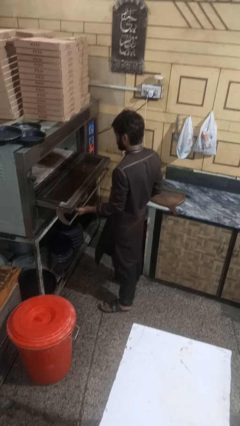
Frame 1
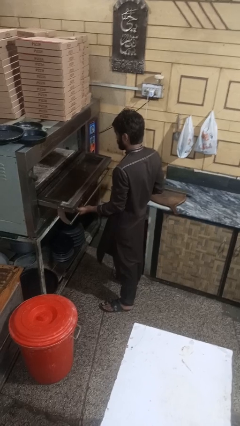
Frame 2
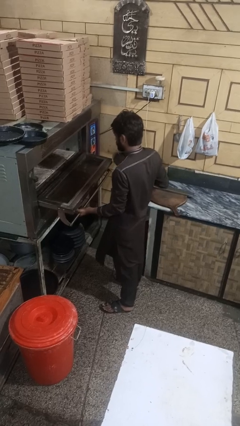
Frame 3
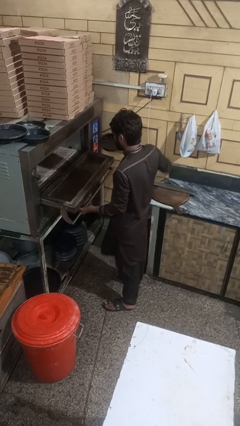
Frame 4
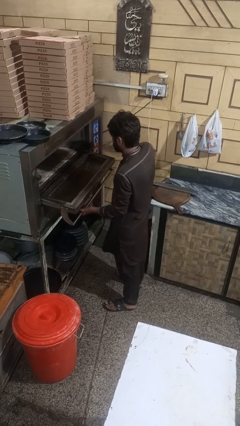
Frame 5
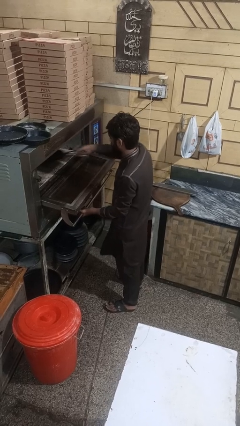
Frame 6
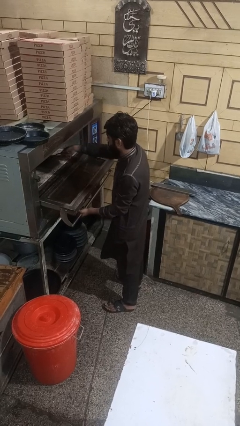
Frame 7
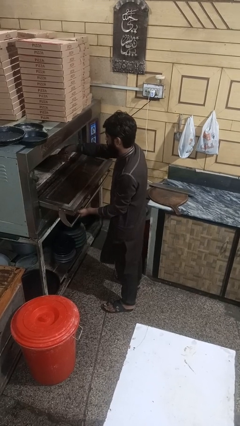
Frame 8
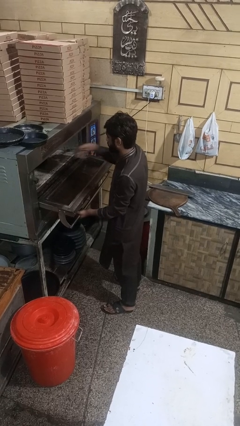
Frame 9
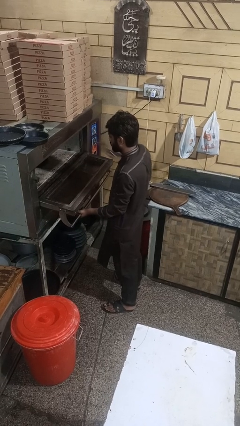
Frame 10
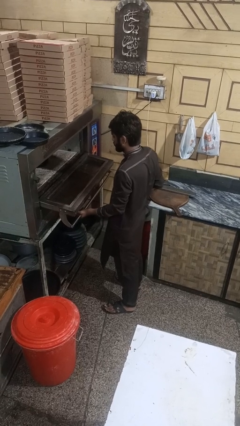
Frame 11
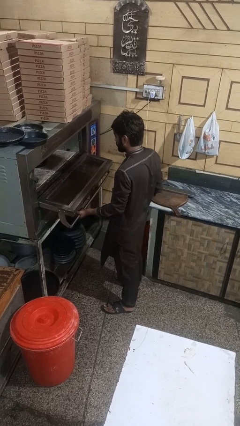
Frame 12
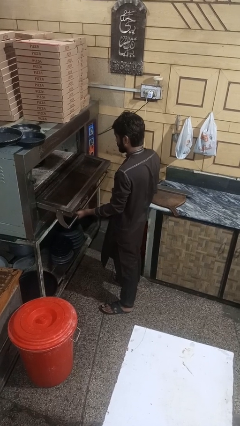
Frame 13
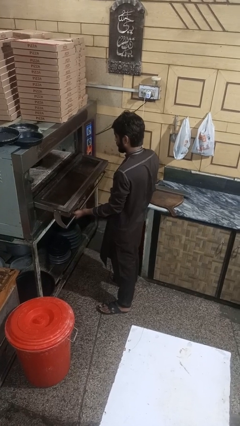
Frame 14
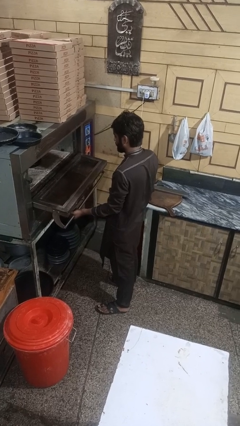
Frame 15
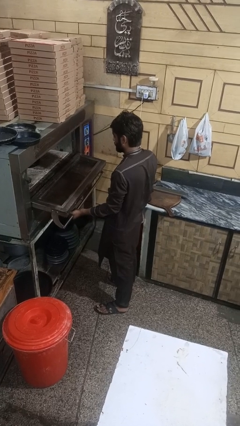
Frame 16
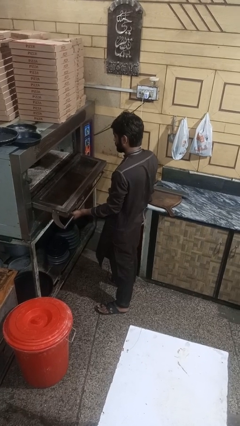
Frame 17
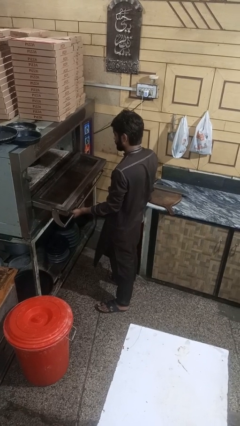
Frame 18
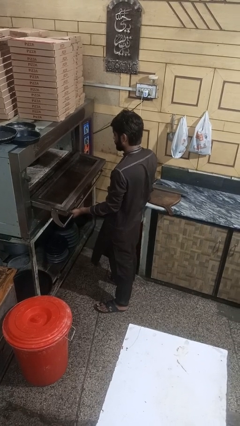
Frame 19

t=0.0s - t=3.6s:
person puts object into microwave

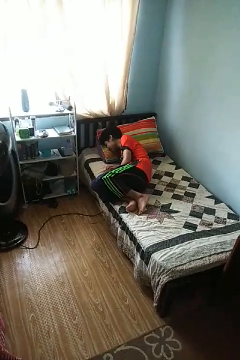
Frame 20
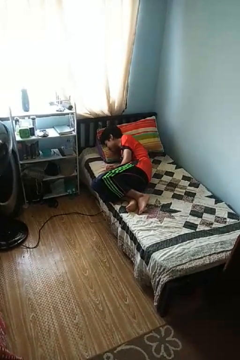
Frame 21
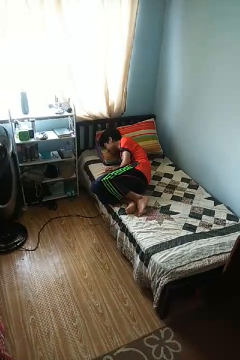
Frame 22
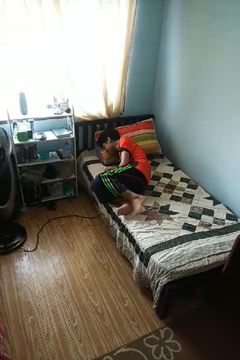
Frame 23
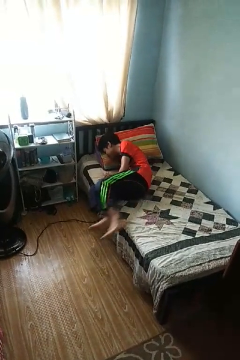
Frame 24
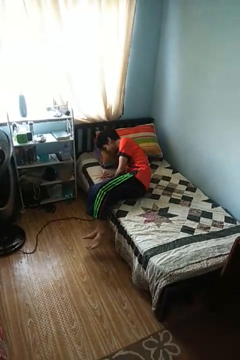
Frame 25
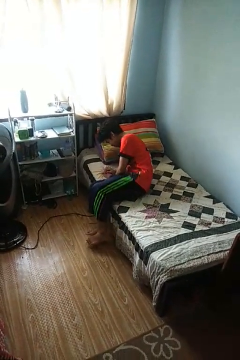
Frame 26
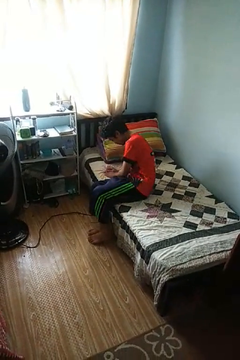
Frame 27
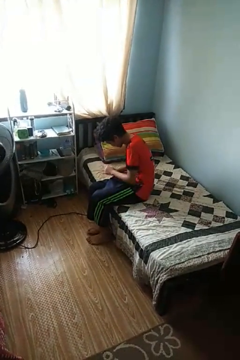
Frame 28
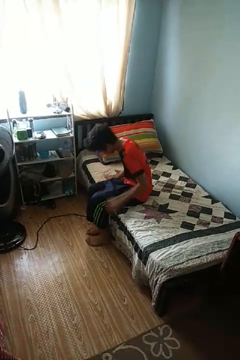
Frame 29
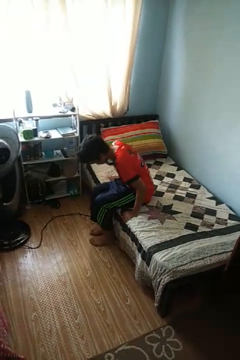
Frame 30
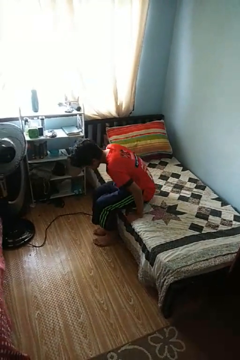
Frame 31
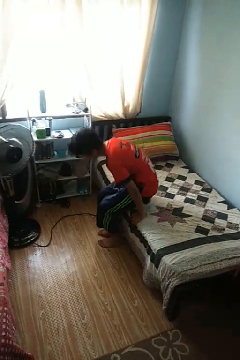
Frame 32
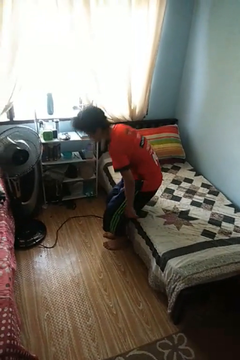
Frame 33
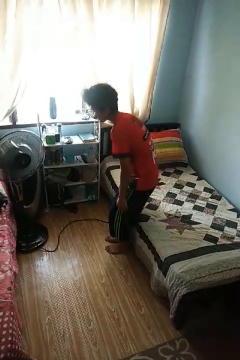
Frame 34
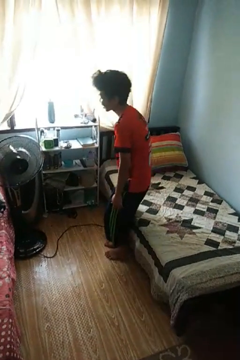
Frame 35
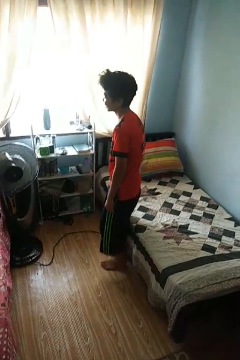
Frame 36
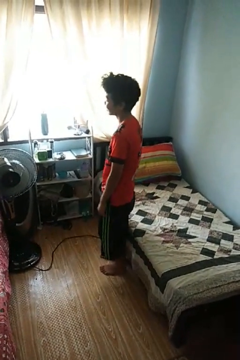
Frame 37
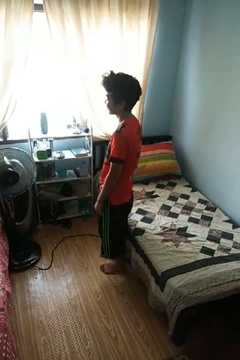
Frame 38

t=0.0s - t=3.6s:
person stands up

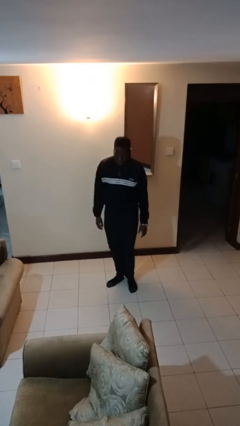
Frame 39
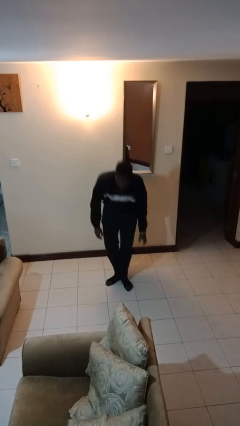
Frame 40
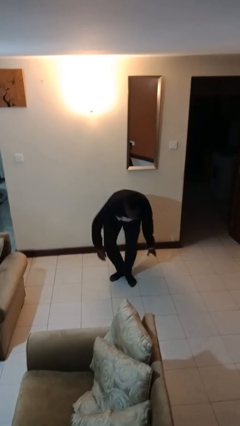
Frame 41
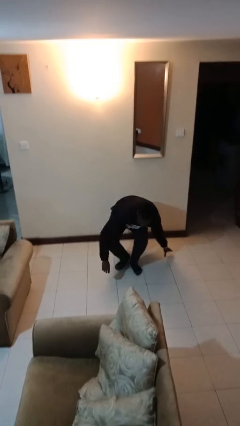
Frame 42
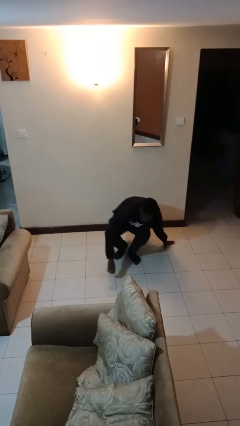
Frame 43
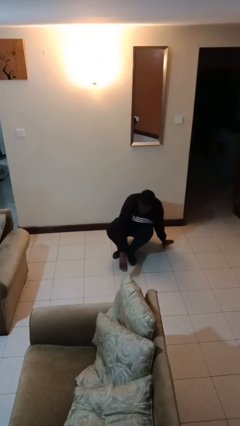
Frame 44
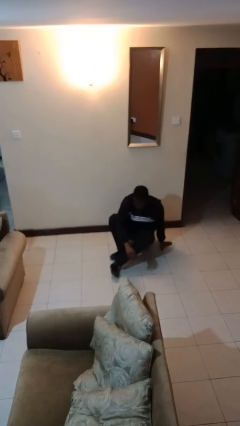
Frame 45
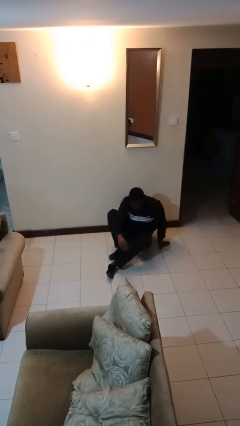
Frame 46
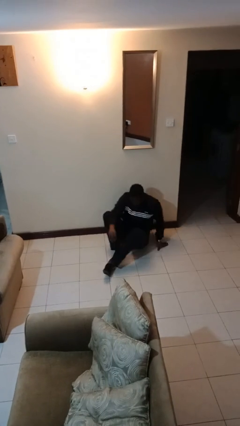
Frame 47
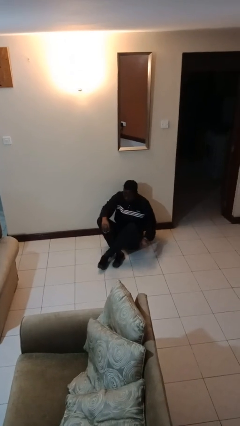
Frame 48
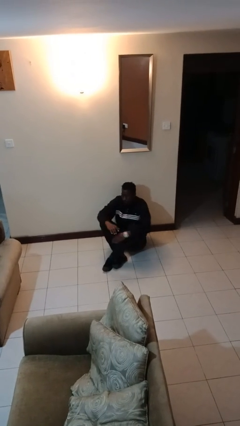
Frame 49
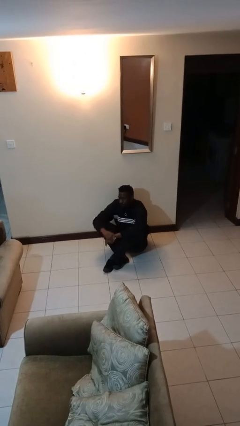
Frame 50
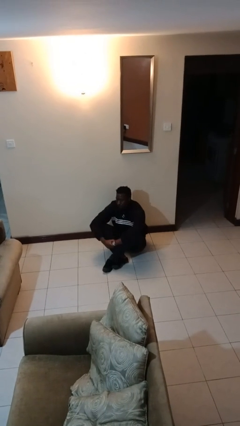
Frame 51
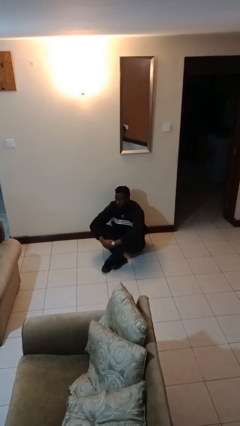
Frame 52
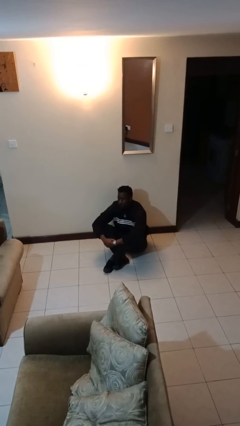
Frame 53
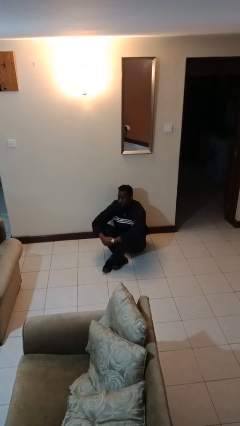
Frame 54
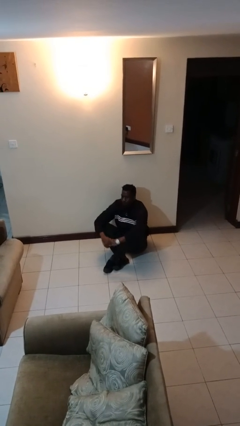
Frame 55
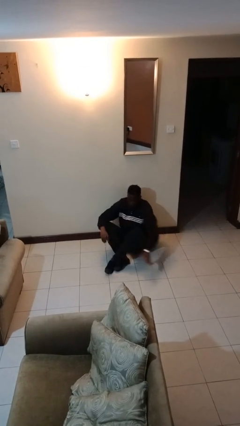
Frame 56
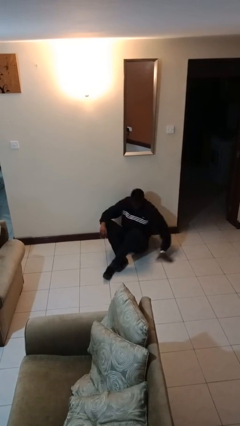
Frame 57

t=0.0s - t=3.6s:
person sits crisscross

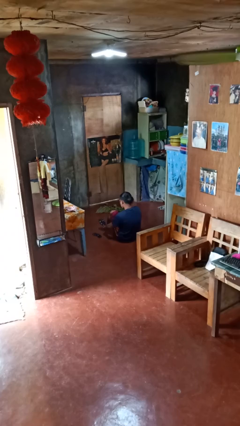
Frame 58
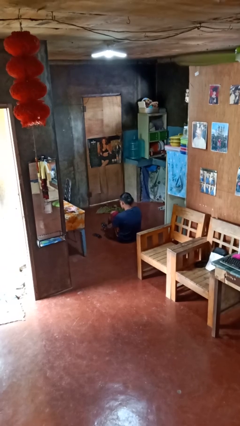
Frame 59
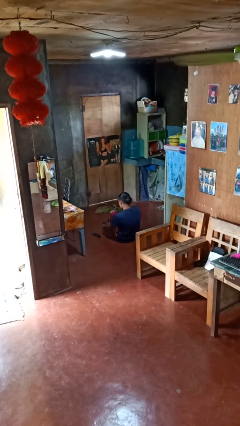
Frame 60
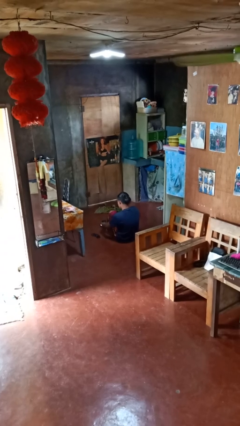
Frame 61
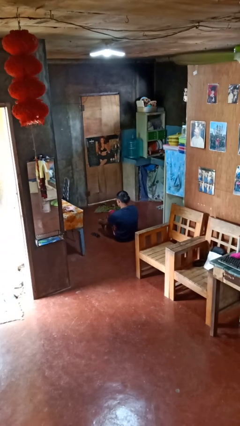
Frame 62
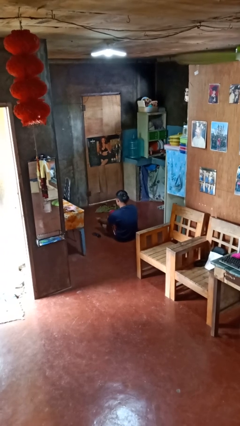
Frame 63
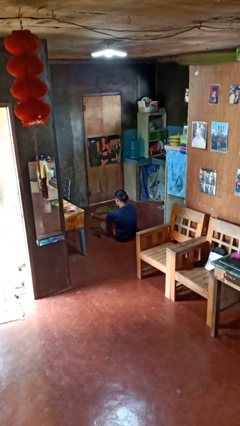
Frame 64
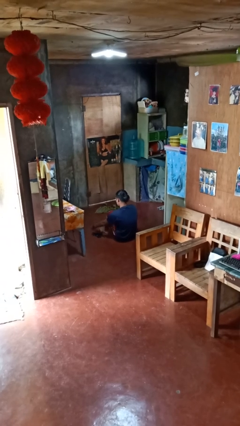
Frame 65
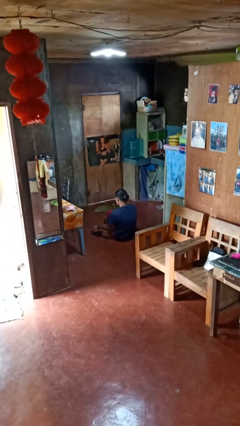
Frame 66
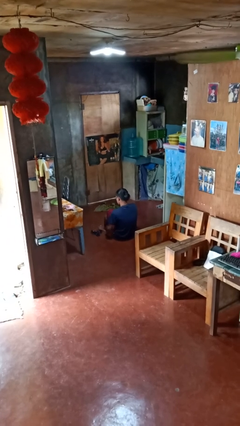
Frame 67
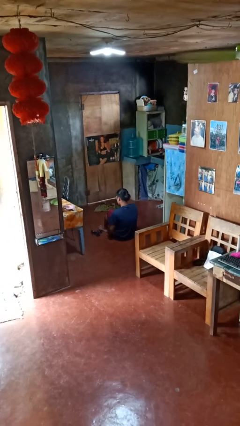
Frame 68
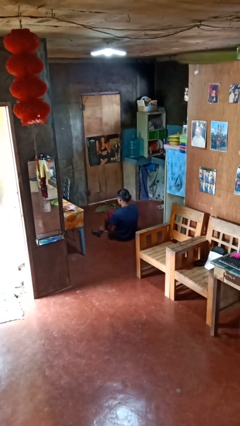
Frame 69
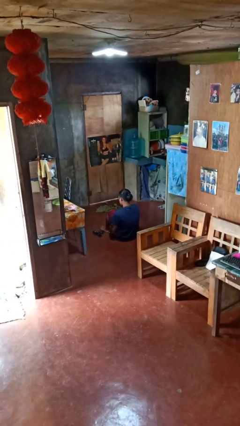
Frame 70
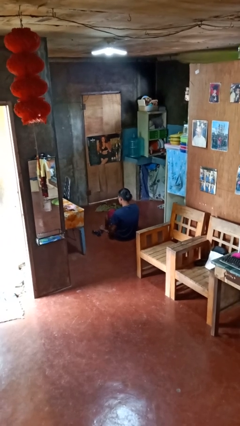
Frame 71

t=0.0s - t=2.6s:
person takes off socks

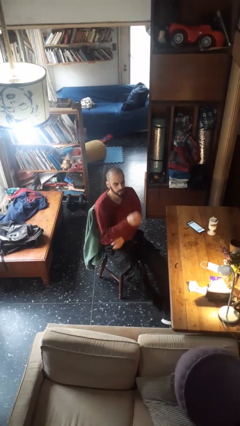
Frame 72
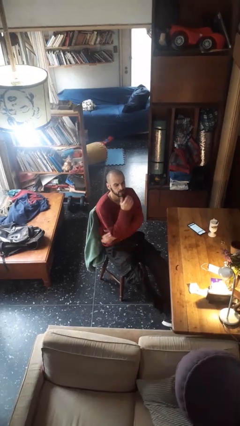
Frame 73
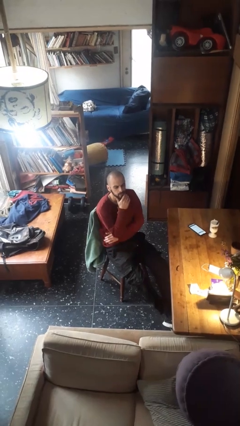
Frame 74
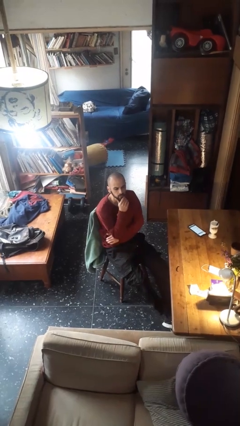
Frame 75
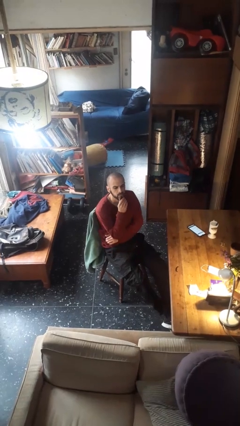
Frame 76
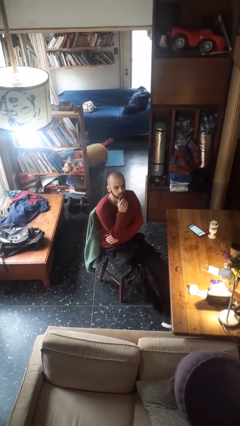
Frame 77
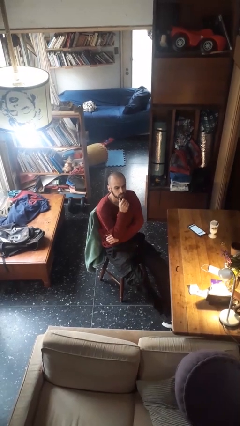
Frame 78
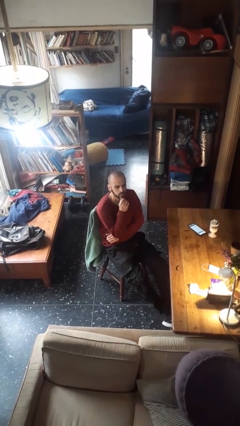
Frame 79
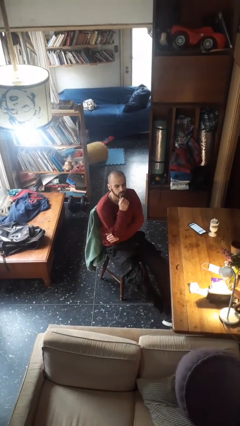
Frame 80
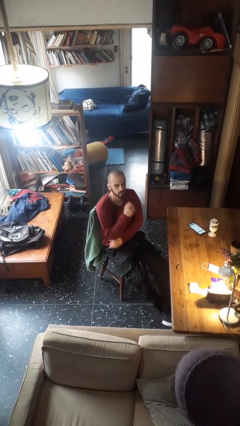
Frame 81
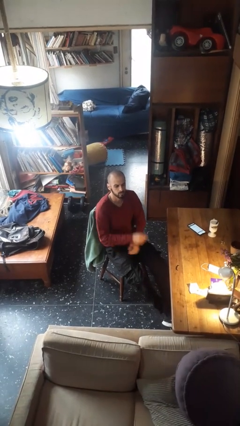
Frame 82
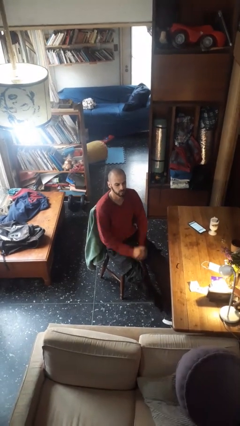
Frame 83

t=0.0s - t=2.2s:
person strokes chin

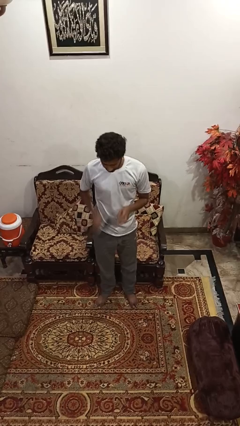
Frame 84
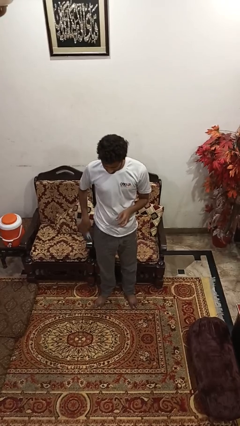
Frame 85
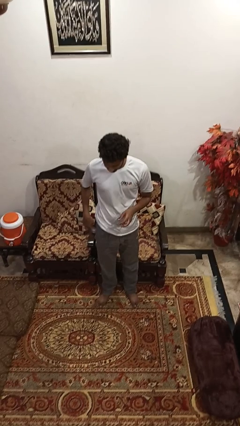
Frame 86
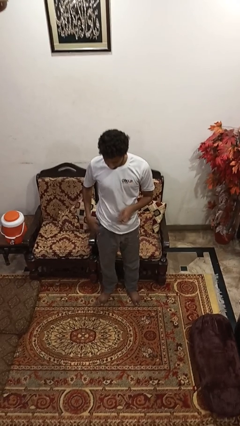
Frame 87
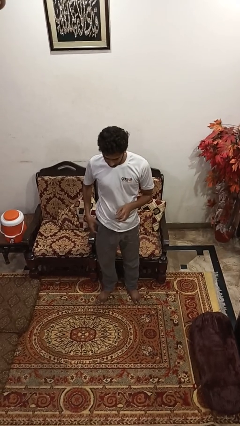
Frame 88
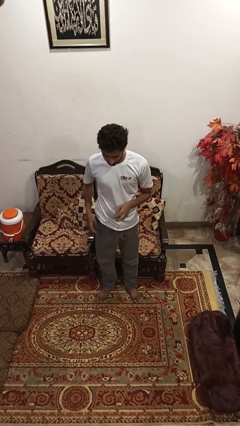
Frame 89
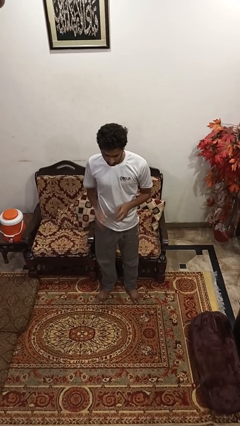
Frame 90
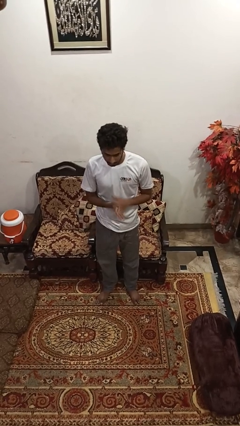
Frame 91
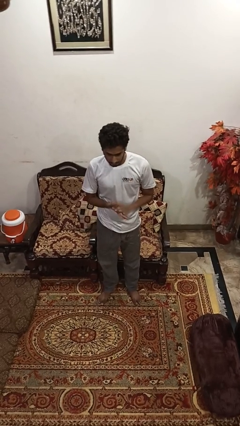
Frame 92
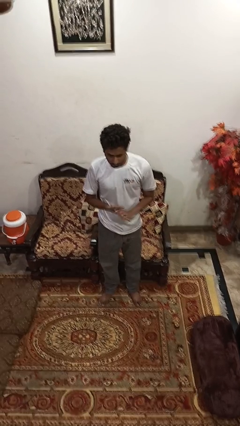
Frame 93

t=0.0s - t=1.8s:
person puts phone into pocket

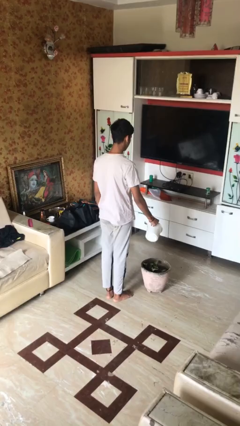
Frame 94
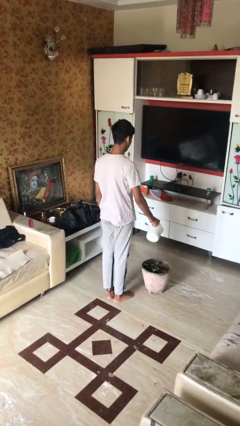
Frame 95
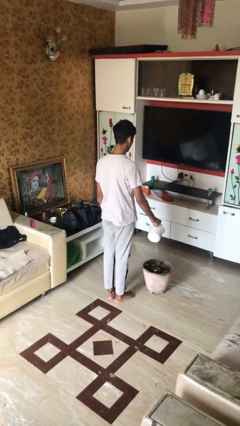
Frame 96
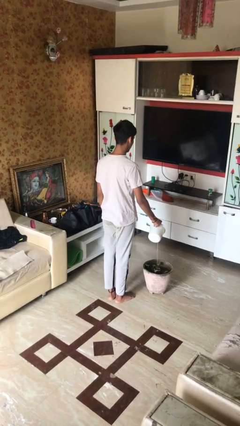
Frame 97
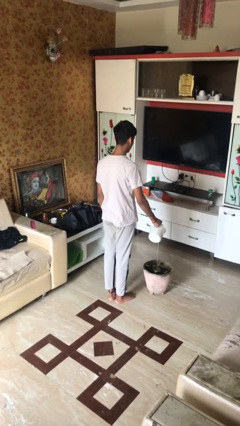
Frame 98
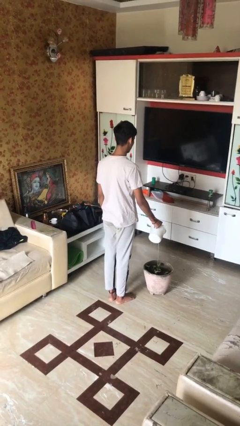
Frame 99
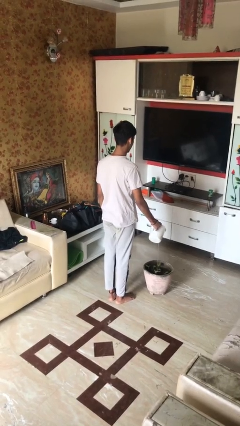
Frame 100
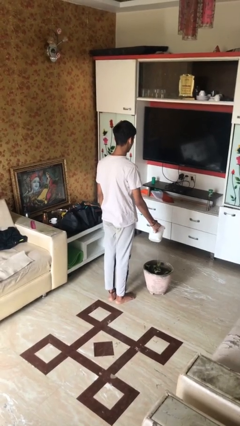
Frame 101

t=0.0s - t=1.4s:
person waters houseplant
